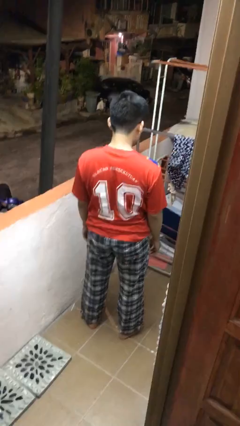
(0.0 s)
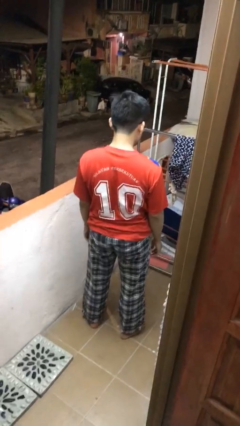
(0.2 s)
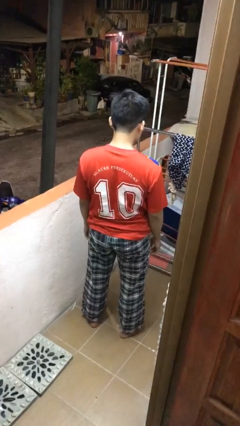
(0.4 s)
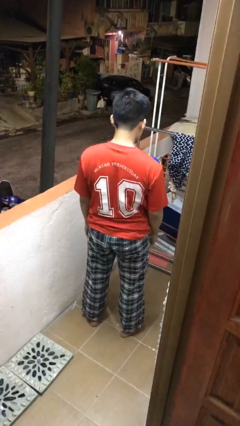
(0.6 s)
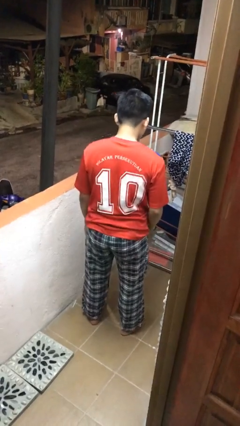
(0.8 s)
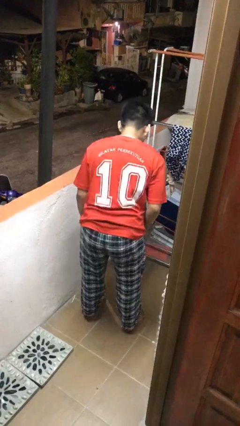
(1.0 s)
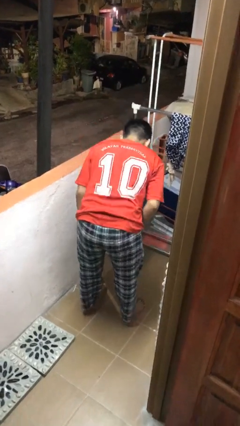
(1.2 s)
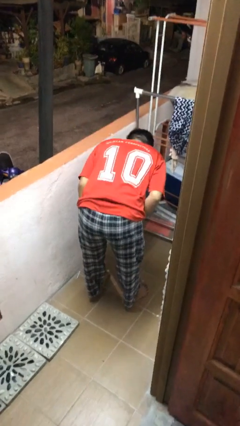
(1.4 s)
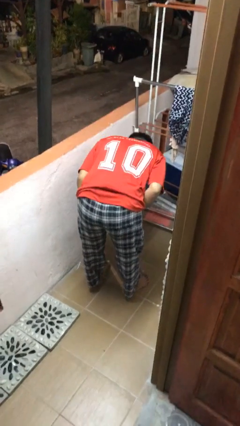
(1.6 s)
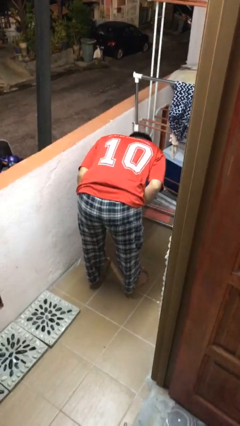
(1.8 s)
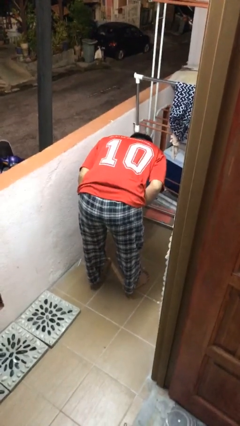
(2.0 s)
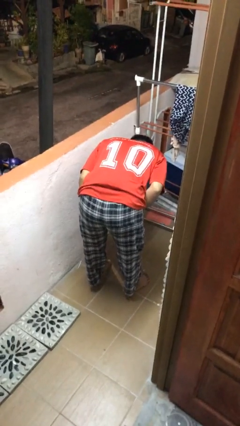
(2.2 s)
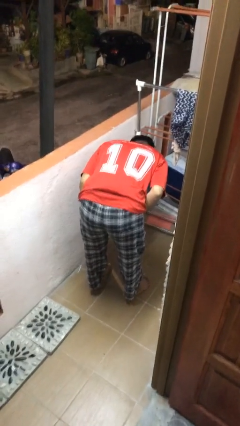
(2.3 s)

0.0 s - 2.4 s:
person bows

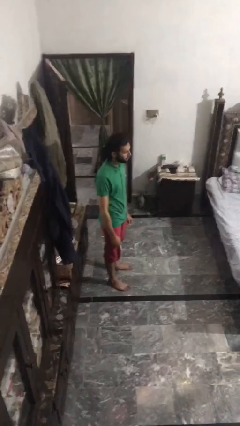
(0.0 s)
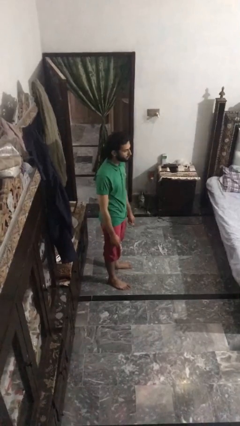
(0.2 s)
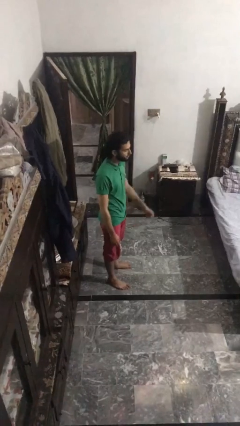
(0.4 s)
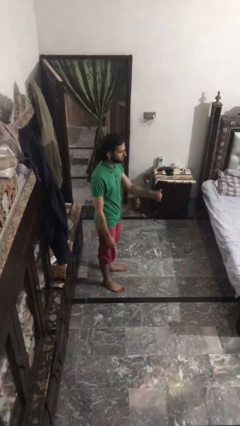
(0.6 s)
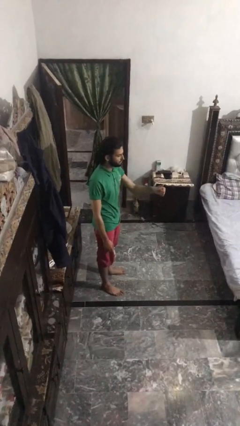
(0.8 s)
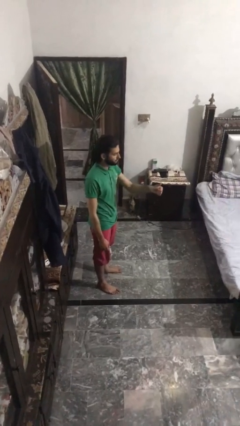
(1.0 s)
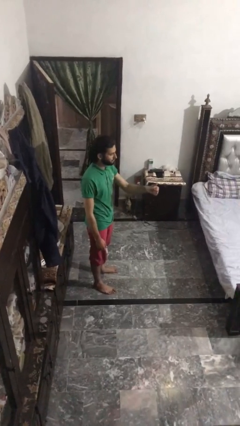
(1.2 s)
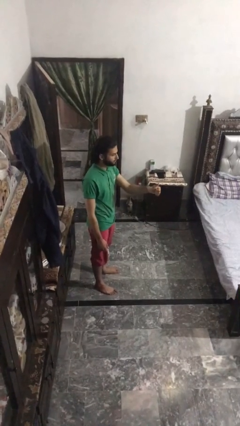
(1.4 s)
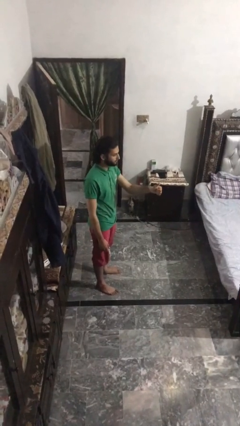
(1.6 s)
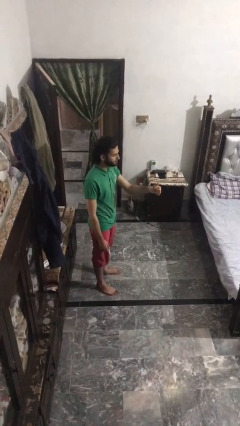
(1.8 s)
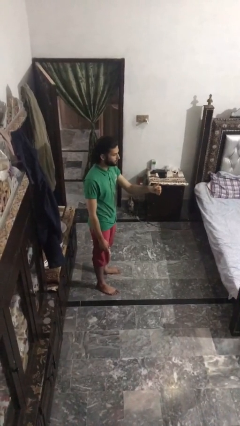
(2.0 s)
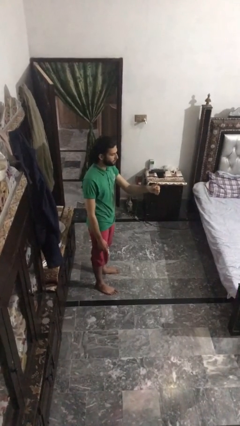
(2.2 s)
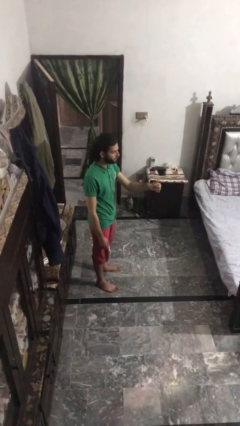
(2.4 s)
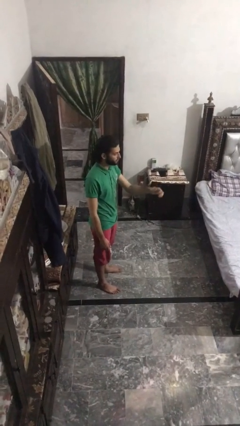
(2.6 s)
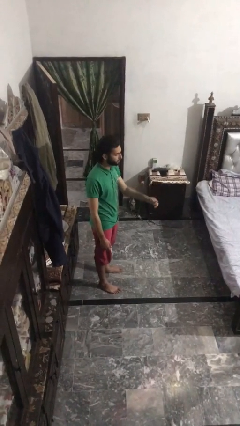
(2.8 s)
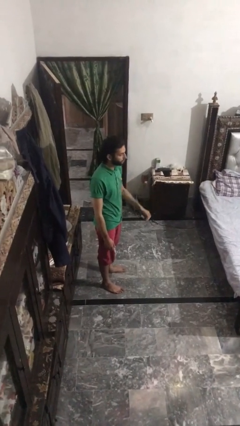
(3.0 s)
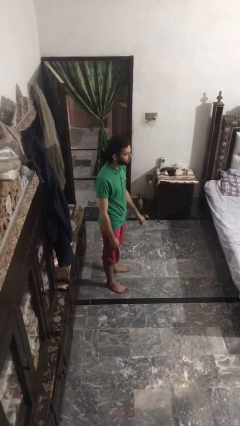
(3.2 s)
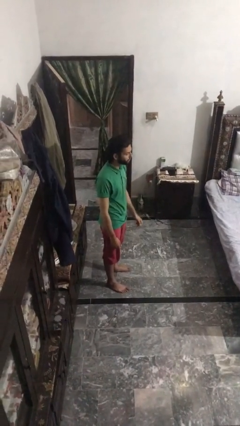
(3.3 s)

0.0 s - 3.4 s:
person gestures thumbs up

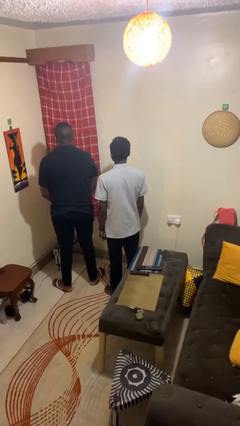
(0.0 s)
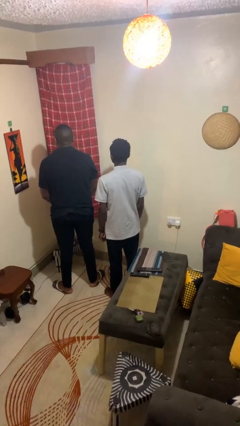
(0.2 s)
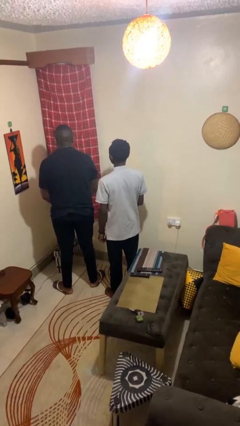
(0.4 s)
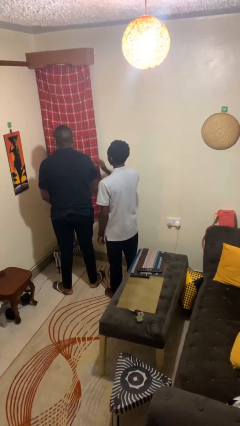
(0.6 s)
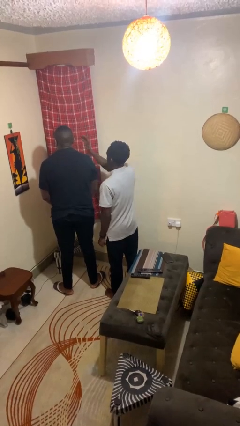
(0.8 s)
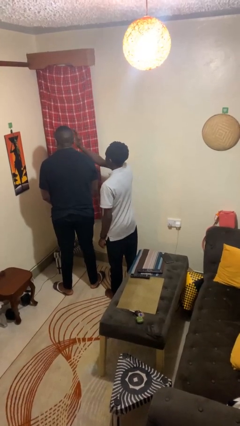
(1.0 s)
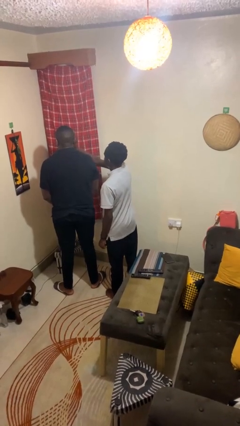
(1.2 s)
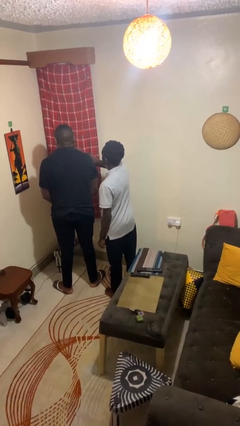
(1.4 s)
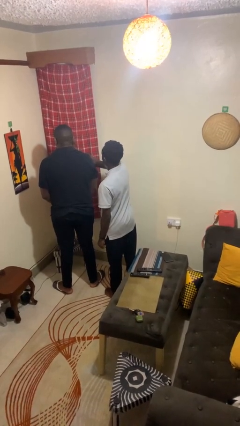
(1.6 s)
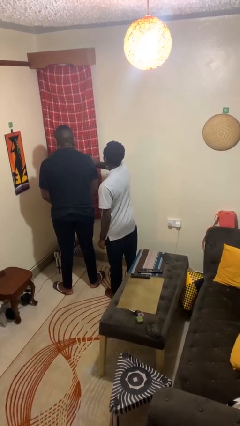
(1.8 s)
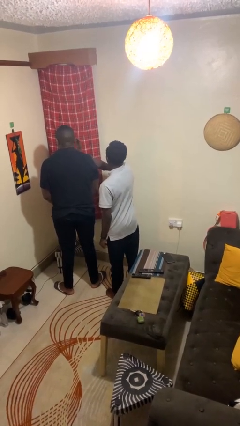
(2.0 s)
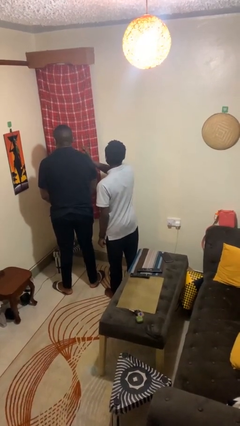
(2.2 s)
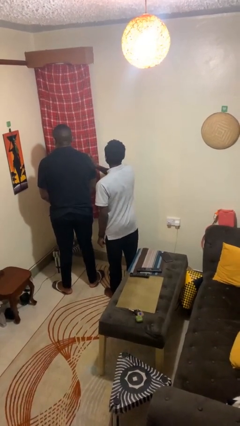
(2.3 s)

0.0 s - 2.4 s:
person touches face of person

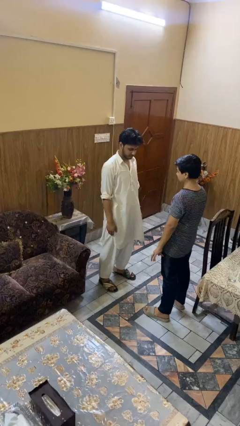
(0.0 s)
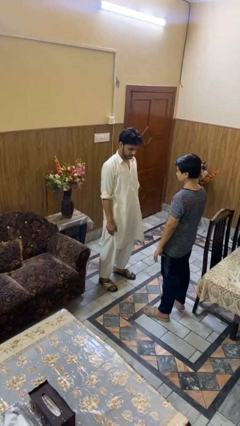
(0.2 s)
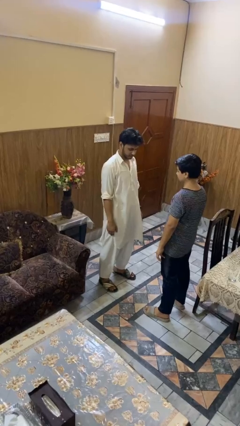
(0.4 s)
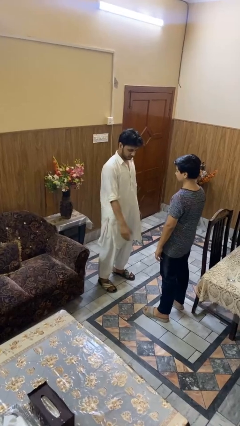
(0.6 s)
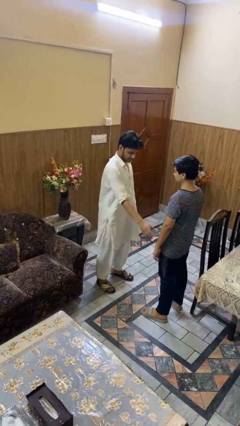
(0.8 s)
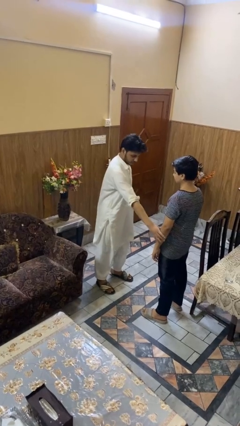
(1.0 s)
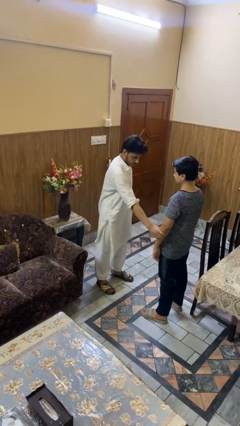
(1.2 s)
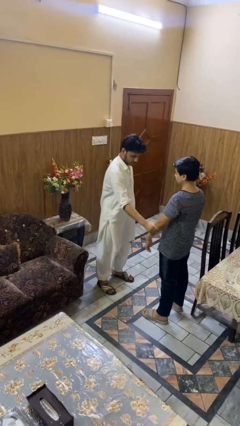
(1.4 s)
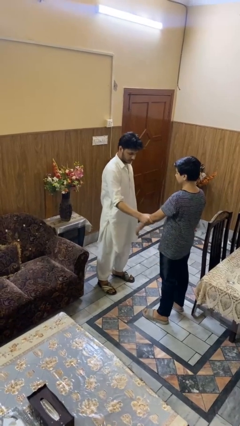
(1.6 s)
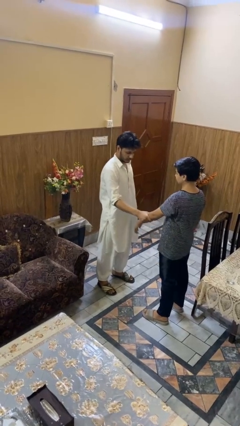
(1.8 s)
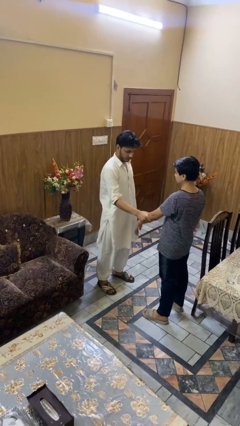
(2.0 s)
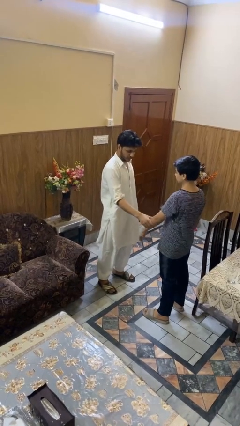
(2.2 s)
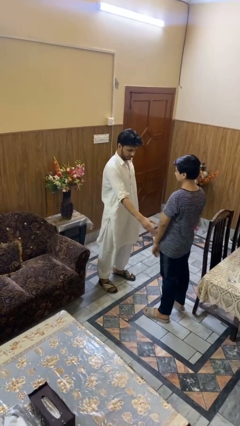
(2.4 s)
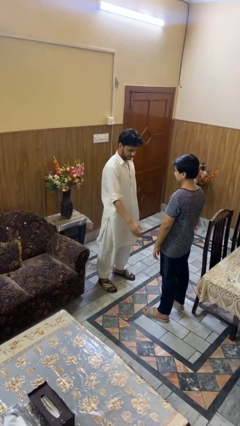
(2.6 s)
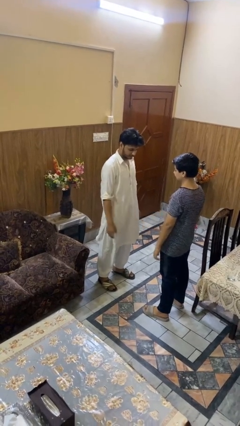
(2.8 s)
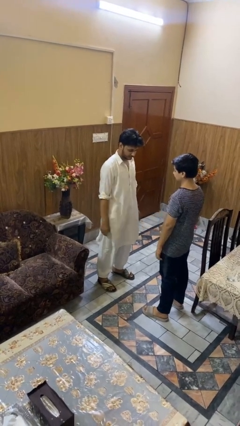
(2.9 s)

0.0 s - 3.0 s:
person grabs person by forearm

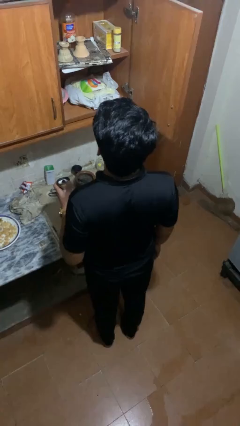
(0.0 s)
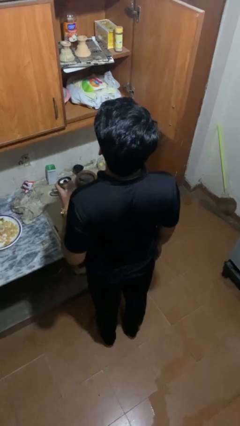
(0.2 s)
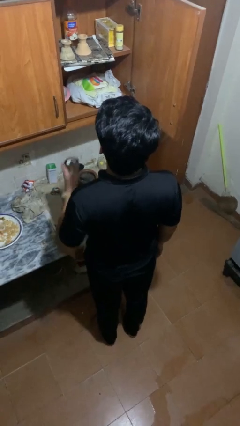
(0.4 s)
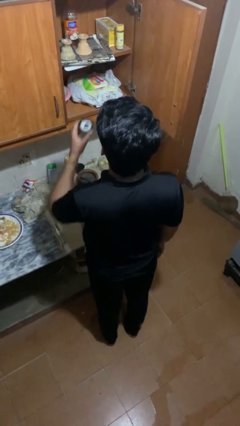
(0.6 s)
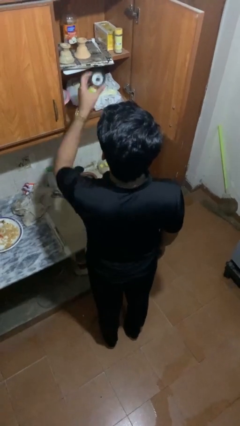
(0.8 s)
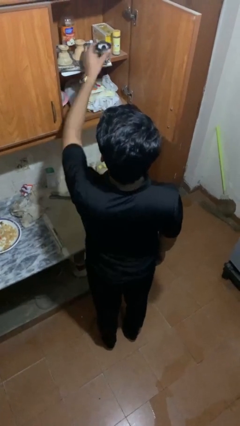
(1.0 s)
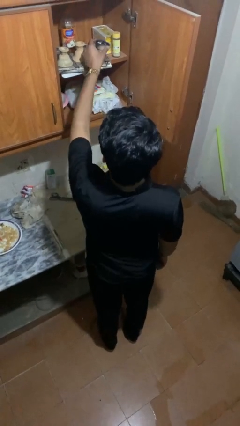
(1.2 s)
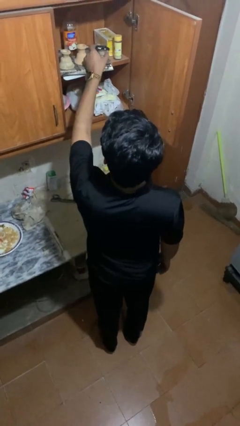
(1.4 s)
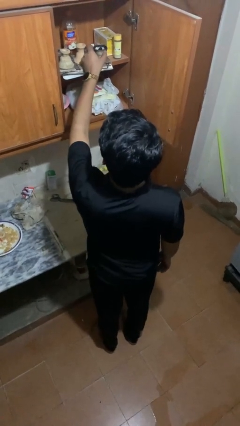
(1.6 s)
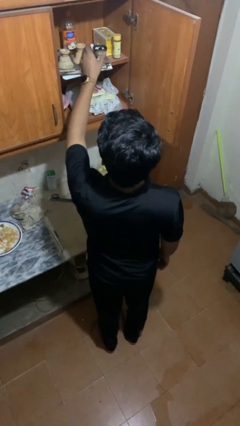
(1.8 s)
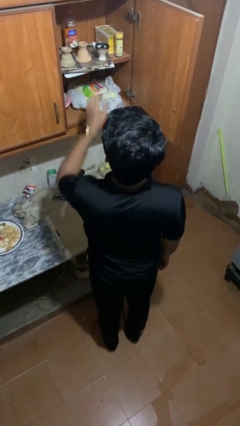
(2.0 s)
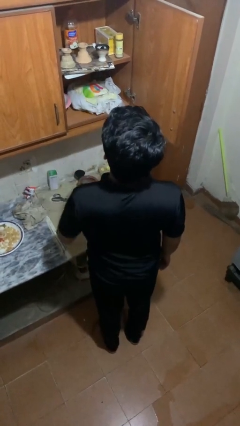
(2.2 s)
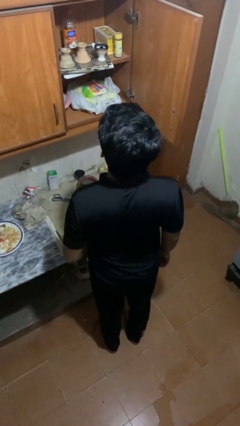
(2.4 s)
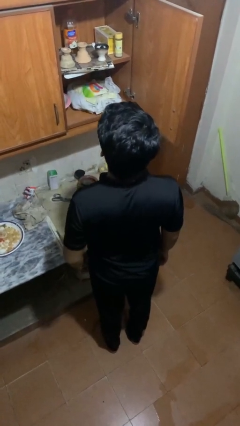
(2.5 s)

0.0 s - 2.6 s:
person puts object in cabinet

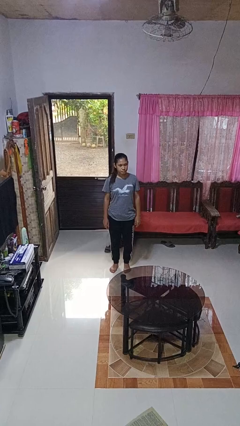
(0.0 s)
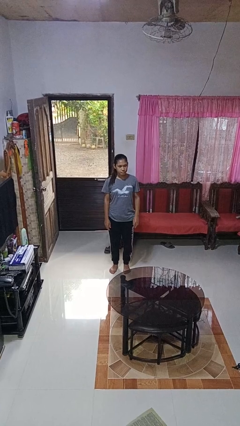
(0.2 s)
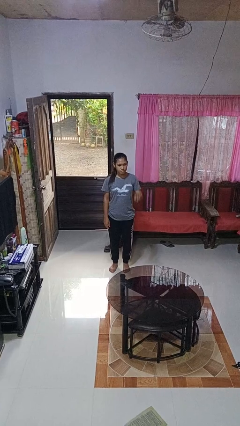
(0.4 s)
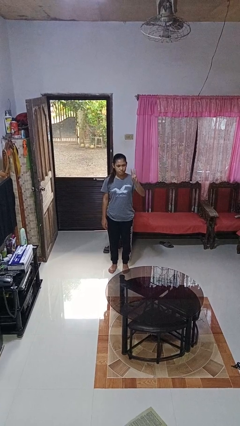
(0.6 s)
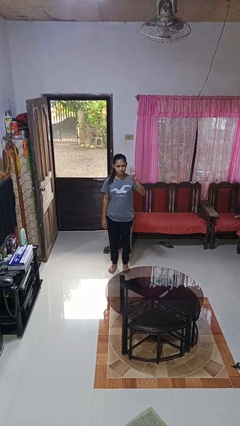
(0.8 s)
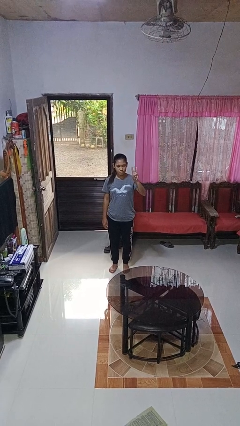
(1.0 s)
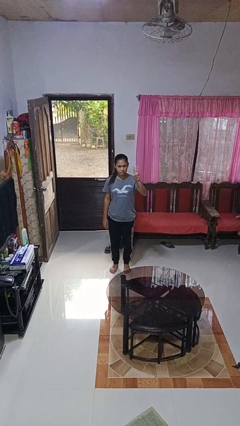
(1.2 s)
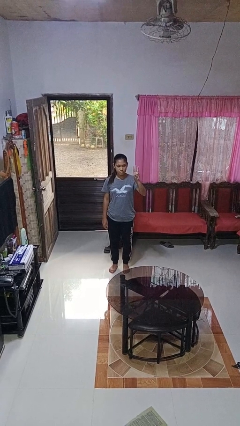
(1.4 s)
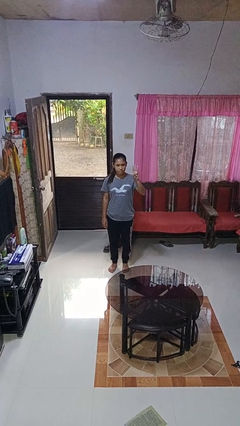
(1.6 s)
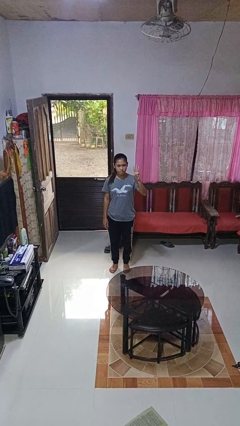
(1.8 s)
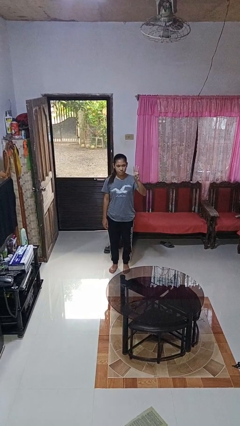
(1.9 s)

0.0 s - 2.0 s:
person gestures number three

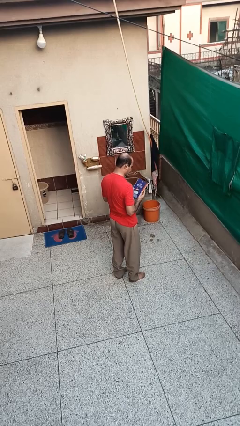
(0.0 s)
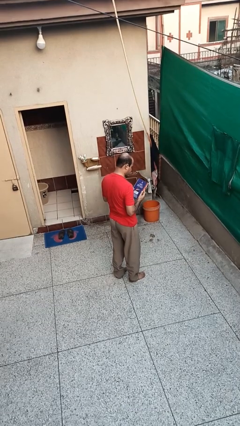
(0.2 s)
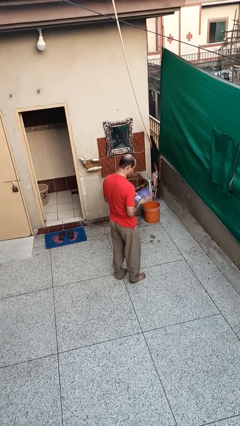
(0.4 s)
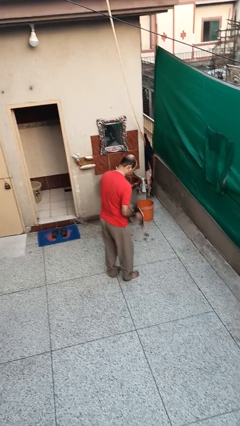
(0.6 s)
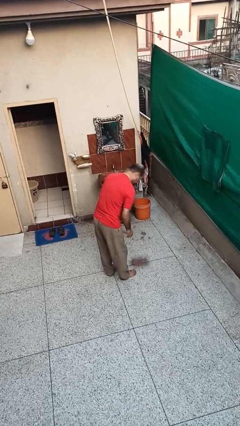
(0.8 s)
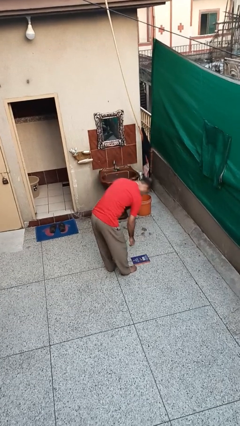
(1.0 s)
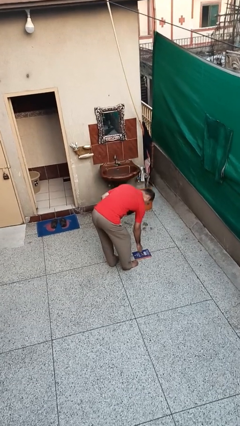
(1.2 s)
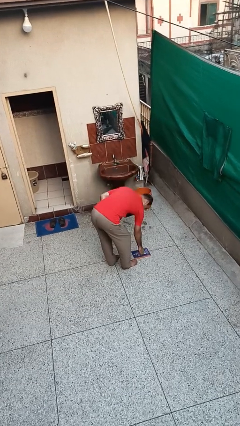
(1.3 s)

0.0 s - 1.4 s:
person drops object
